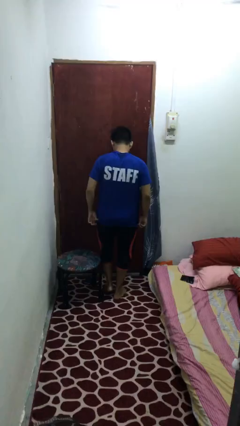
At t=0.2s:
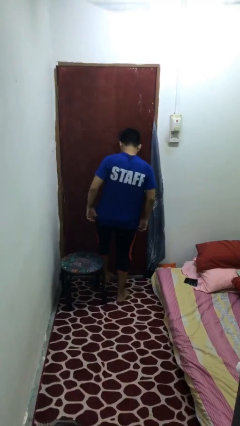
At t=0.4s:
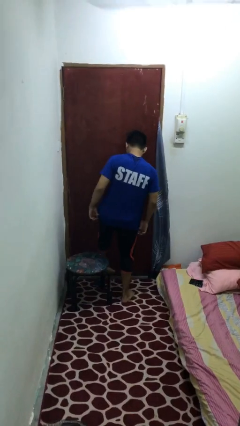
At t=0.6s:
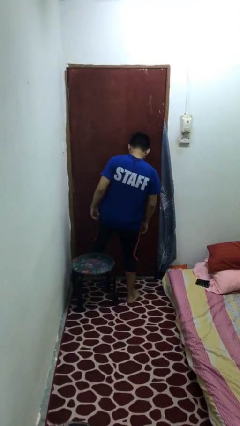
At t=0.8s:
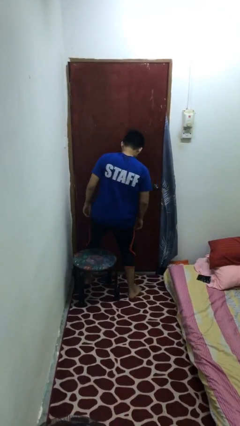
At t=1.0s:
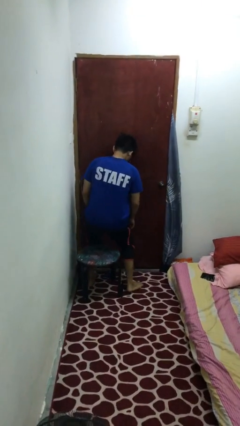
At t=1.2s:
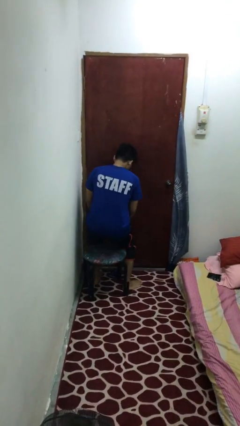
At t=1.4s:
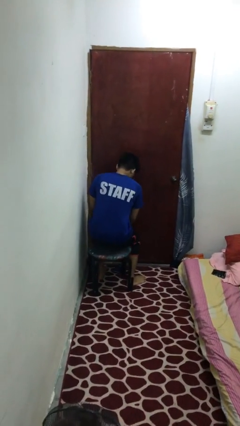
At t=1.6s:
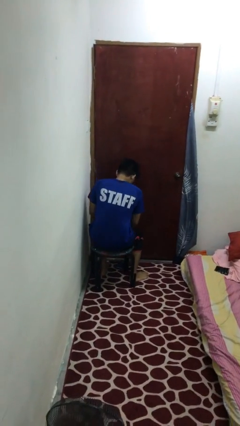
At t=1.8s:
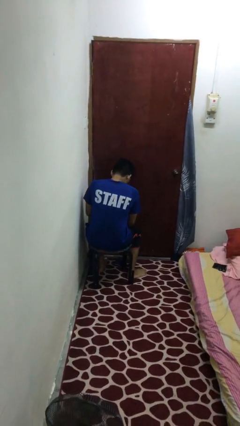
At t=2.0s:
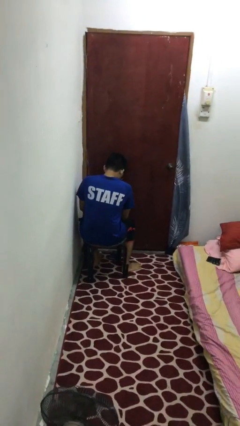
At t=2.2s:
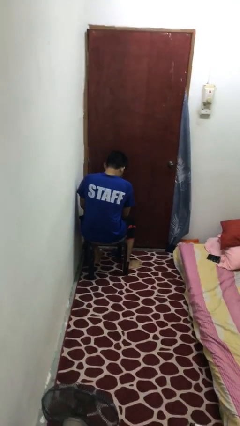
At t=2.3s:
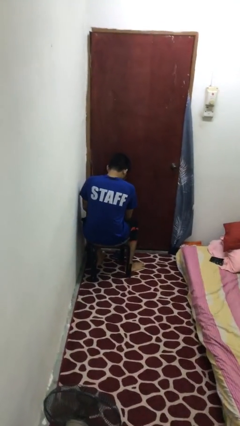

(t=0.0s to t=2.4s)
person sits down

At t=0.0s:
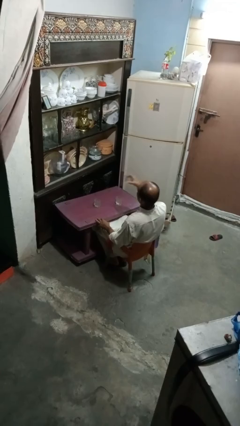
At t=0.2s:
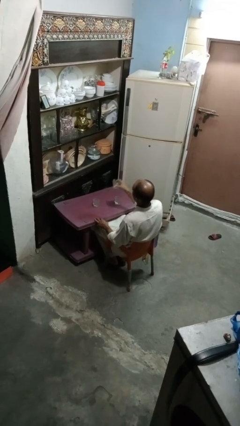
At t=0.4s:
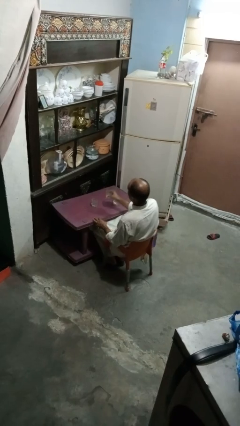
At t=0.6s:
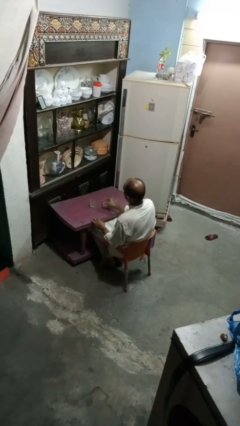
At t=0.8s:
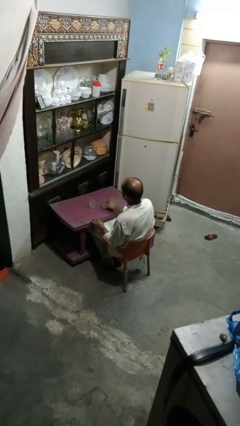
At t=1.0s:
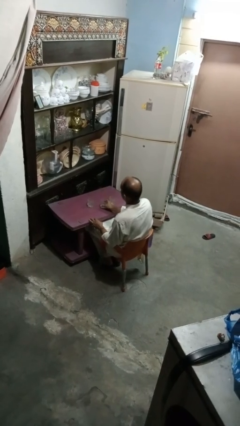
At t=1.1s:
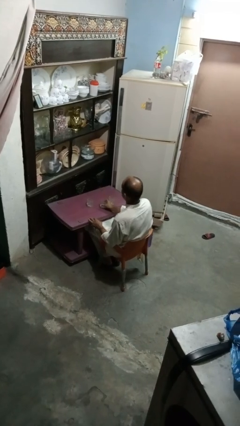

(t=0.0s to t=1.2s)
person puts down object on table

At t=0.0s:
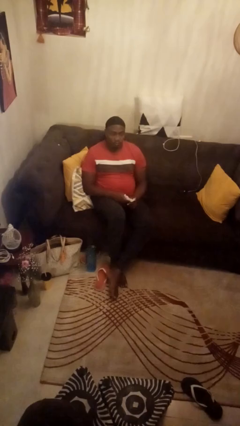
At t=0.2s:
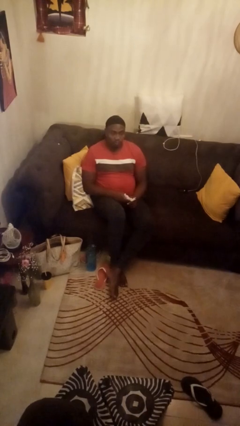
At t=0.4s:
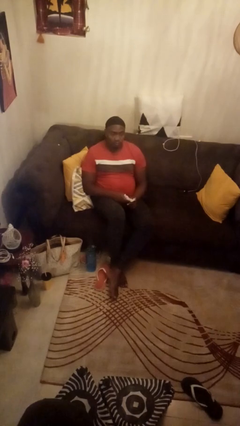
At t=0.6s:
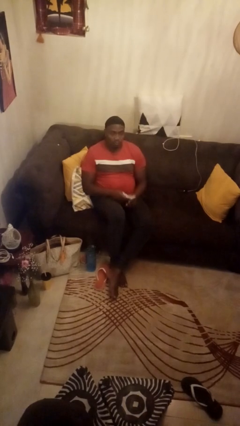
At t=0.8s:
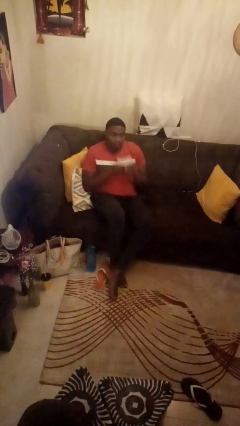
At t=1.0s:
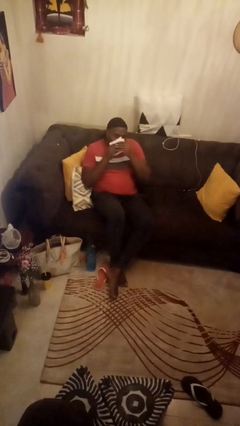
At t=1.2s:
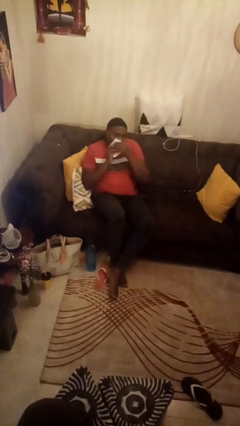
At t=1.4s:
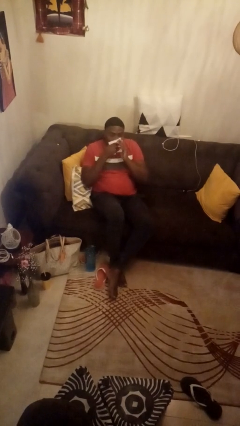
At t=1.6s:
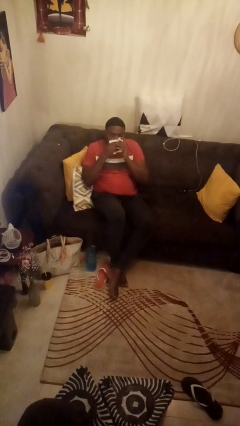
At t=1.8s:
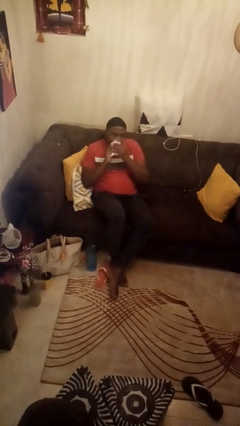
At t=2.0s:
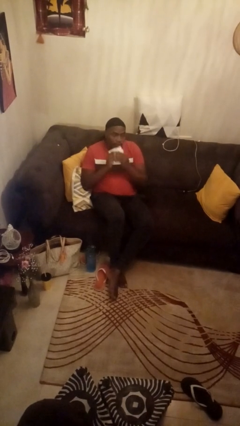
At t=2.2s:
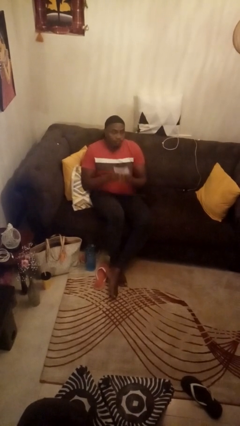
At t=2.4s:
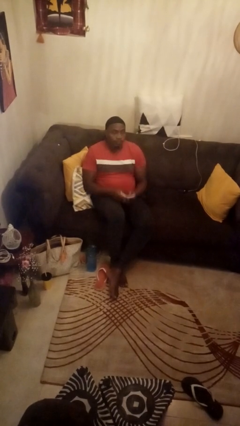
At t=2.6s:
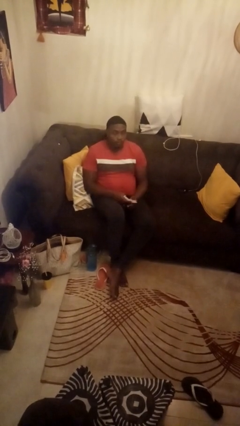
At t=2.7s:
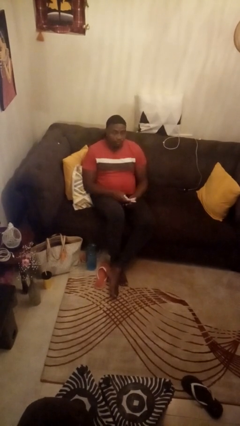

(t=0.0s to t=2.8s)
person wipes mouth with napkin

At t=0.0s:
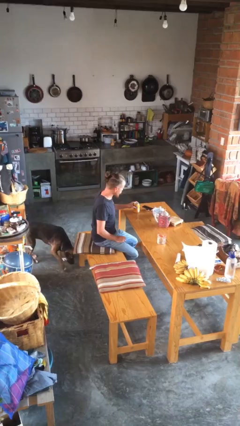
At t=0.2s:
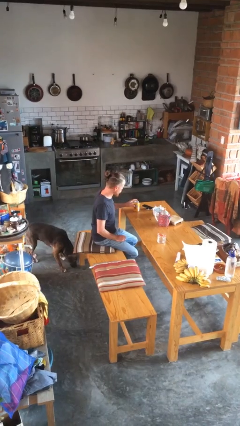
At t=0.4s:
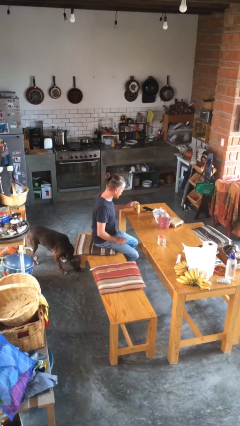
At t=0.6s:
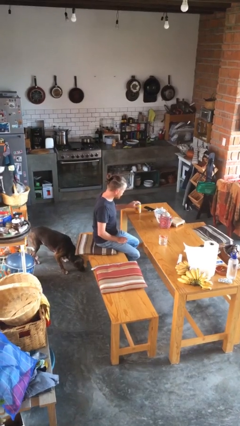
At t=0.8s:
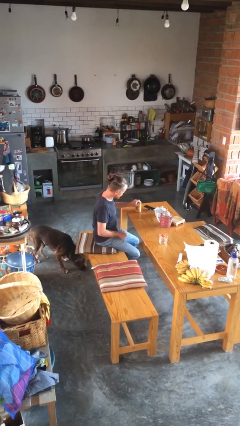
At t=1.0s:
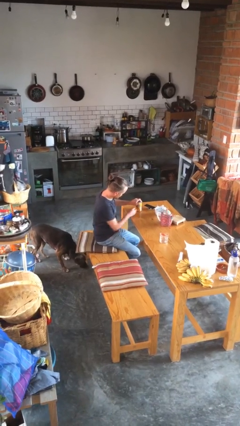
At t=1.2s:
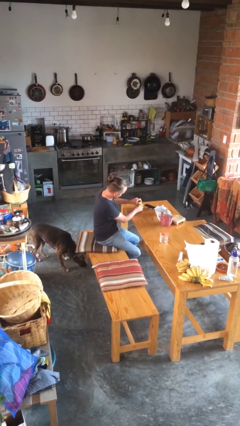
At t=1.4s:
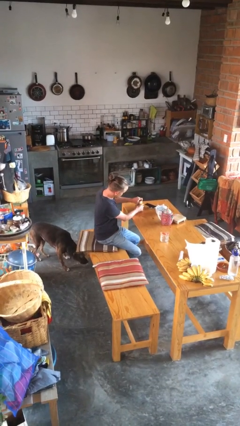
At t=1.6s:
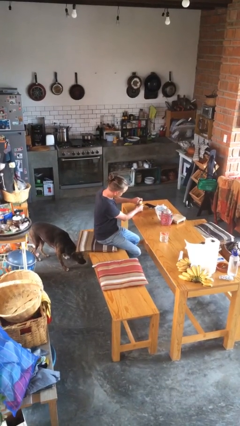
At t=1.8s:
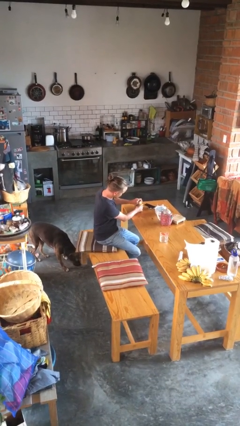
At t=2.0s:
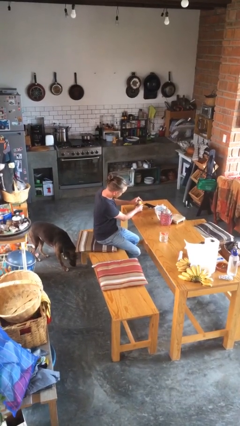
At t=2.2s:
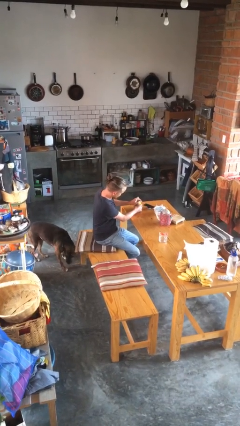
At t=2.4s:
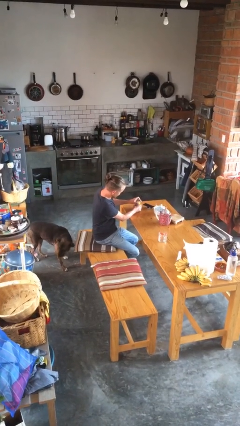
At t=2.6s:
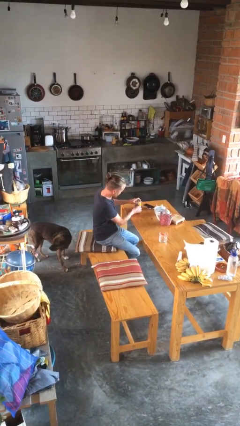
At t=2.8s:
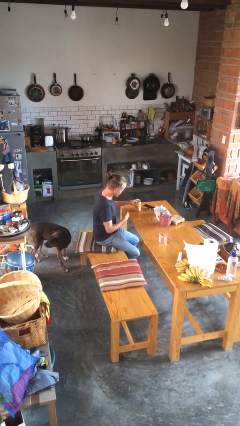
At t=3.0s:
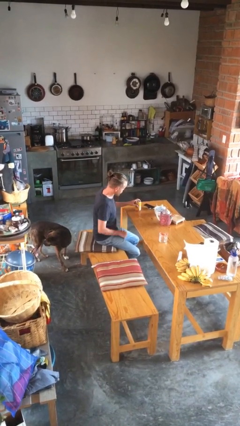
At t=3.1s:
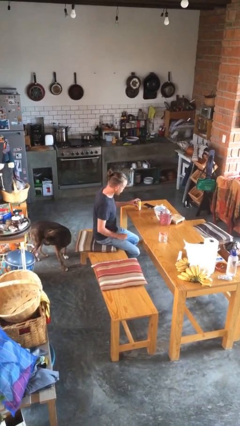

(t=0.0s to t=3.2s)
person opens beverage can

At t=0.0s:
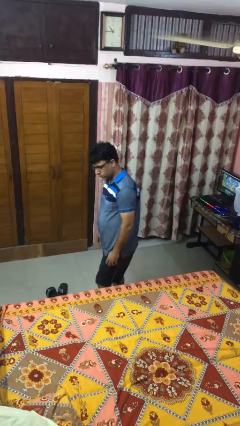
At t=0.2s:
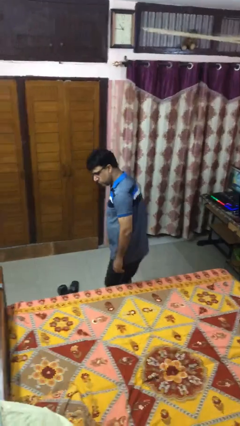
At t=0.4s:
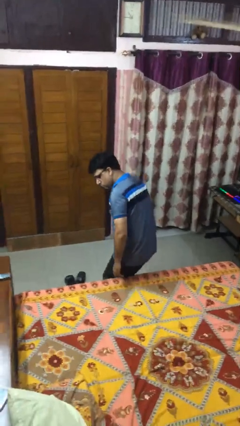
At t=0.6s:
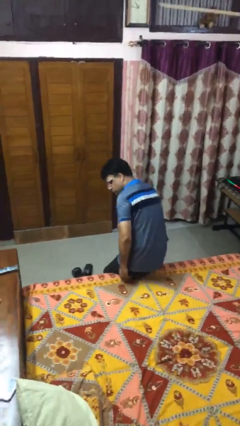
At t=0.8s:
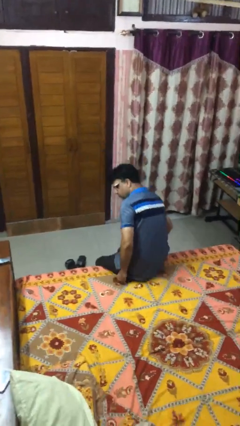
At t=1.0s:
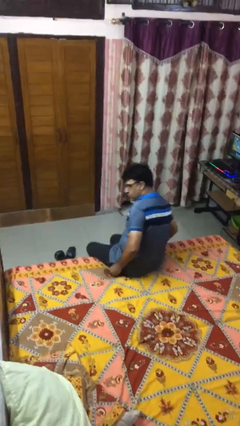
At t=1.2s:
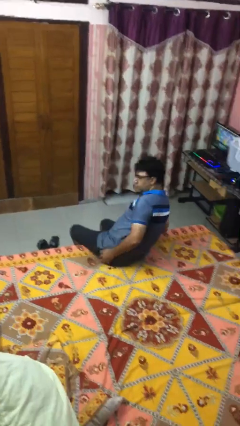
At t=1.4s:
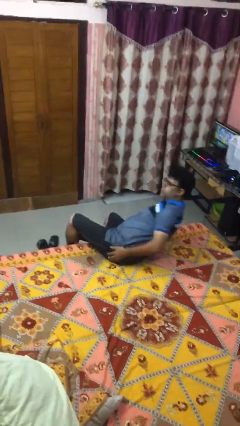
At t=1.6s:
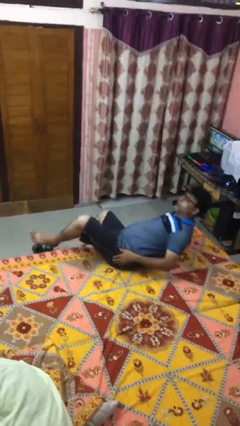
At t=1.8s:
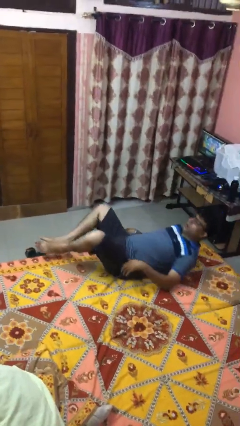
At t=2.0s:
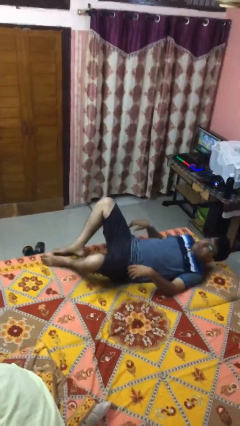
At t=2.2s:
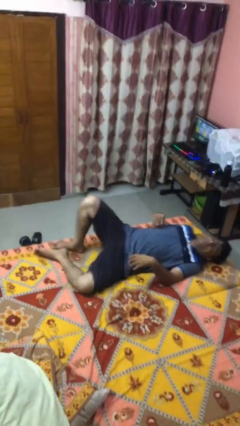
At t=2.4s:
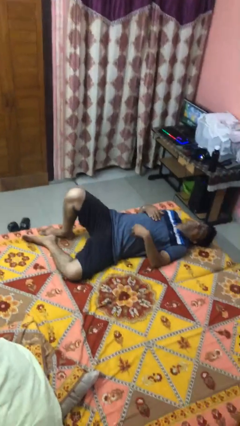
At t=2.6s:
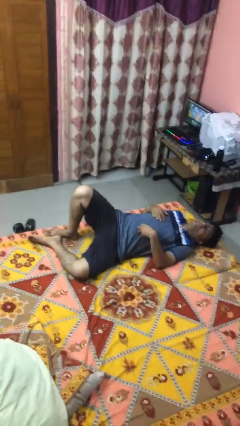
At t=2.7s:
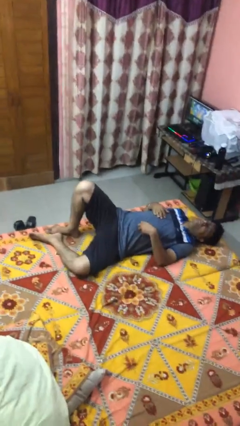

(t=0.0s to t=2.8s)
person lies down on bed

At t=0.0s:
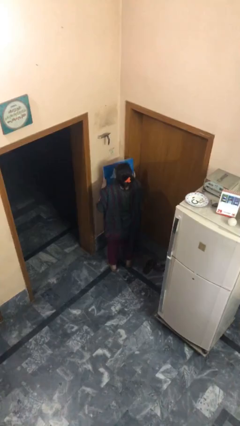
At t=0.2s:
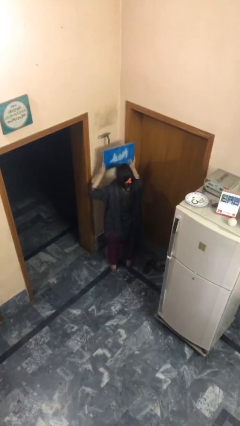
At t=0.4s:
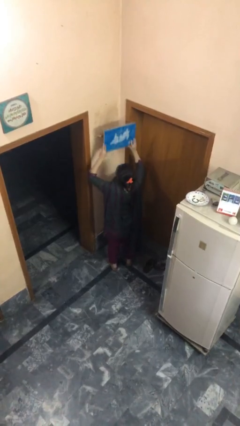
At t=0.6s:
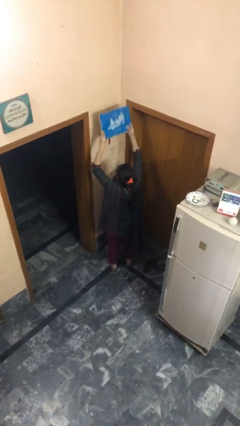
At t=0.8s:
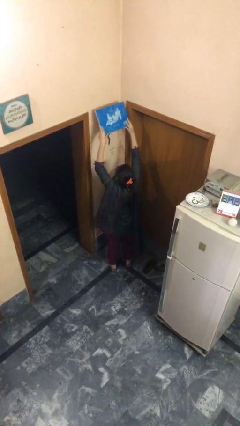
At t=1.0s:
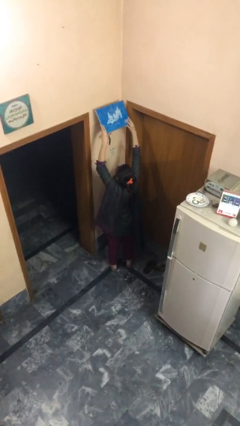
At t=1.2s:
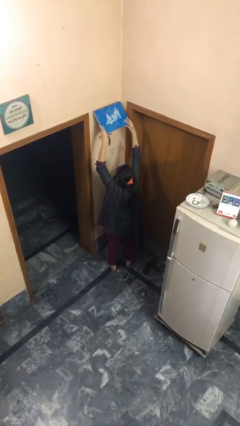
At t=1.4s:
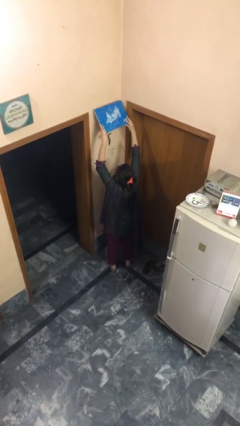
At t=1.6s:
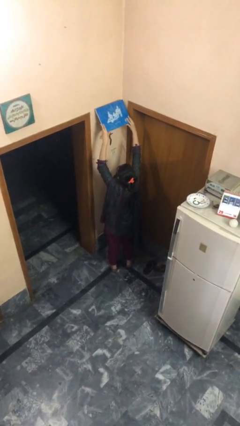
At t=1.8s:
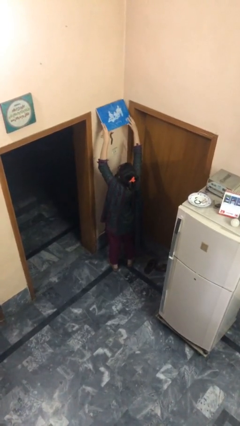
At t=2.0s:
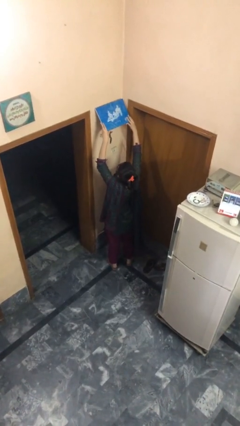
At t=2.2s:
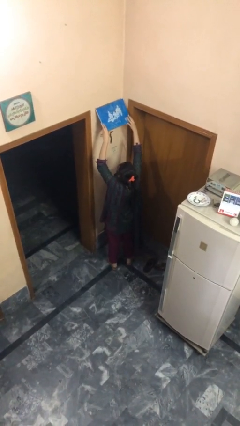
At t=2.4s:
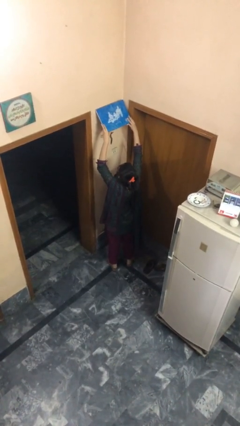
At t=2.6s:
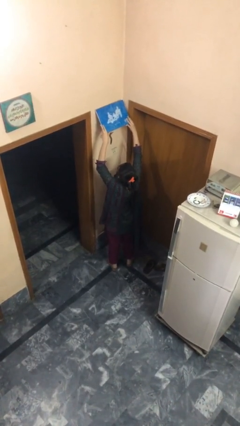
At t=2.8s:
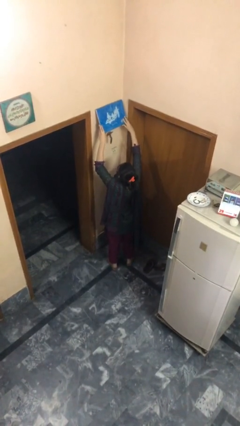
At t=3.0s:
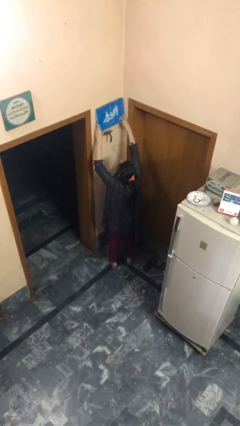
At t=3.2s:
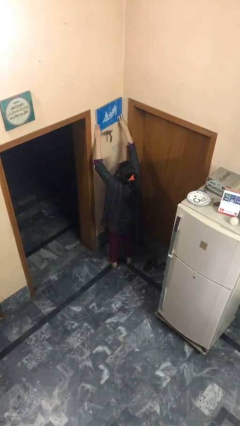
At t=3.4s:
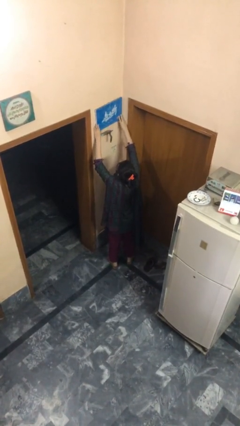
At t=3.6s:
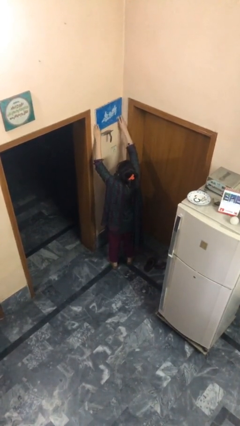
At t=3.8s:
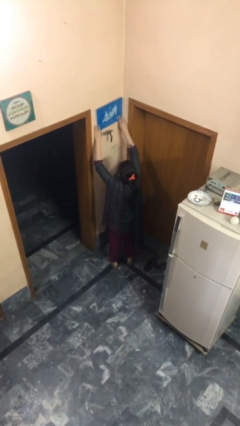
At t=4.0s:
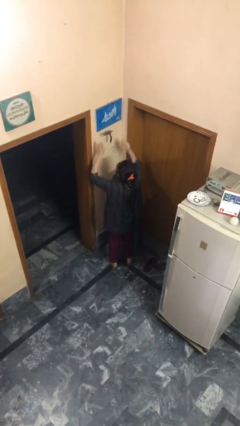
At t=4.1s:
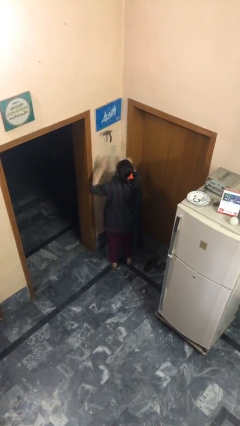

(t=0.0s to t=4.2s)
person puts up picture frame

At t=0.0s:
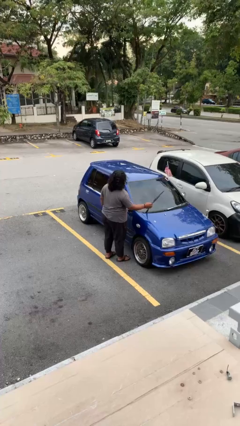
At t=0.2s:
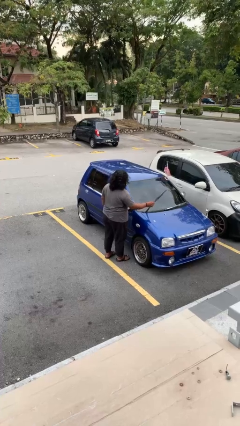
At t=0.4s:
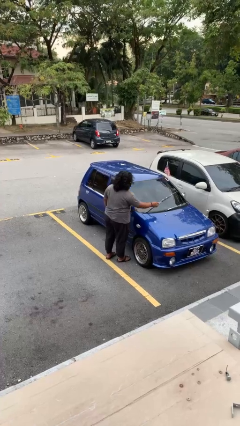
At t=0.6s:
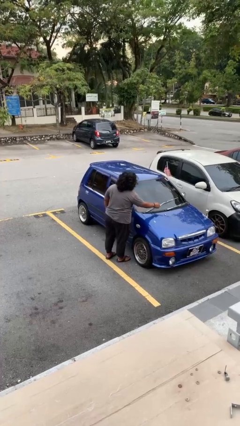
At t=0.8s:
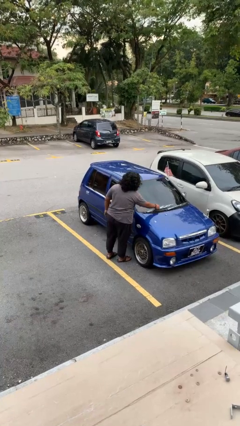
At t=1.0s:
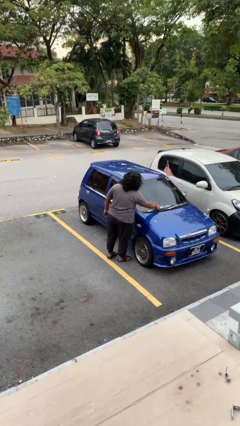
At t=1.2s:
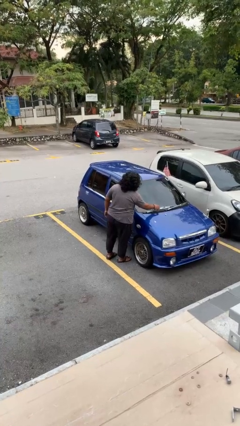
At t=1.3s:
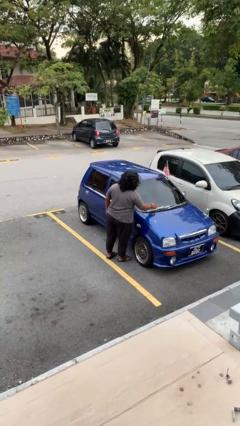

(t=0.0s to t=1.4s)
person flips down car wipers
